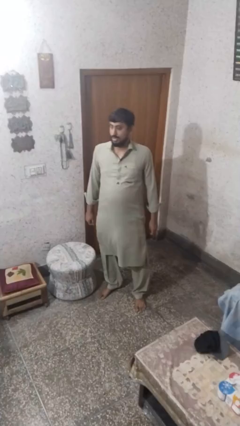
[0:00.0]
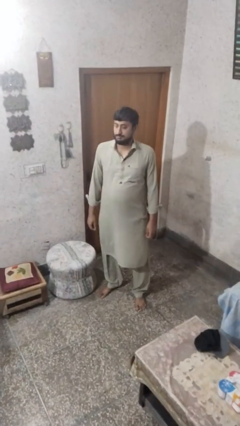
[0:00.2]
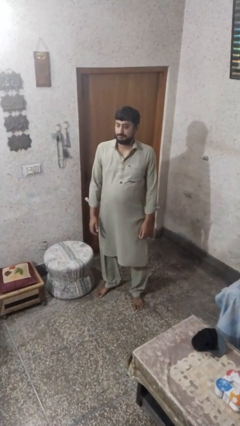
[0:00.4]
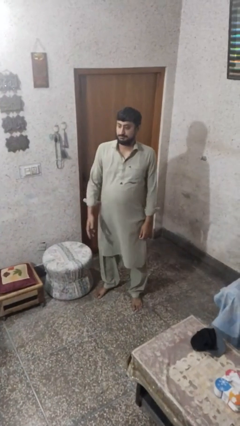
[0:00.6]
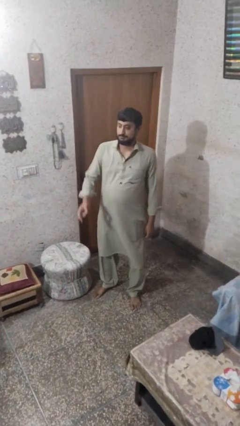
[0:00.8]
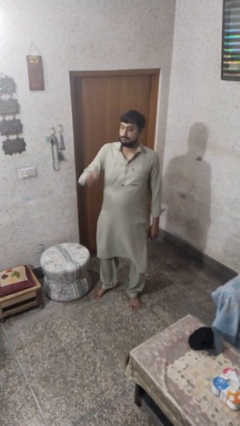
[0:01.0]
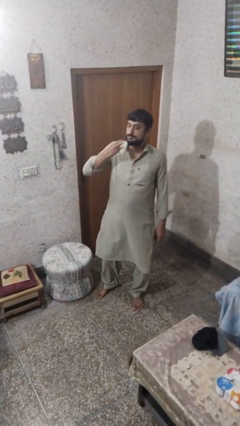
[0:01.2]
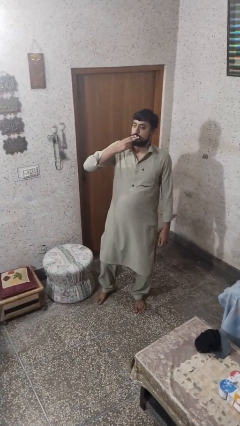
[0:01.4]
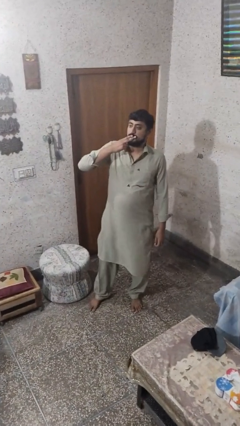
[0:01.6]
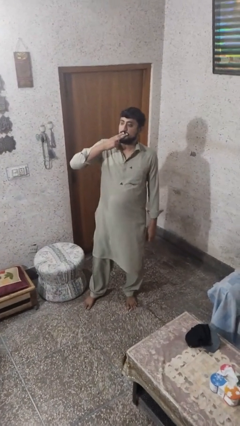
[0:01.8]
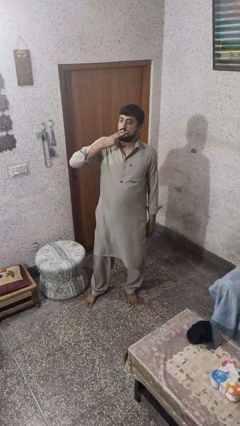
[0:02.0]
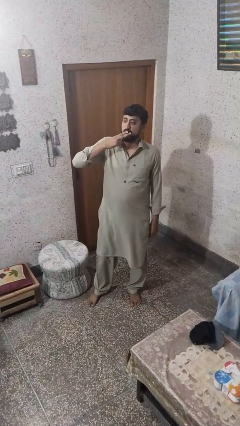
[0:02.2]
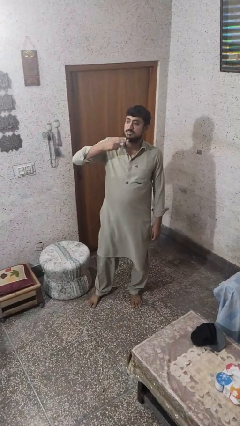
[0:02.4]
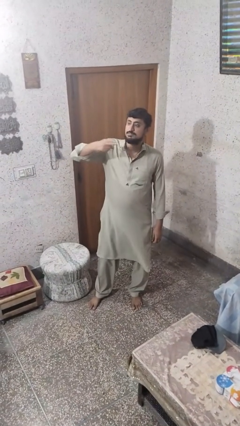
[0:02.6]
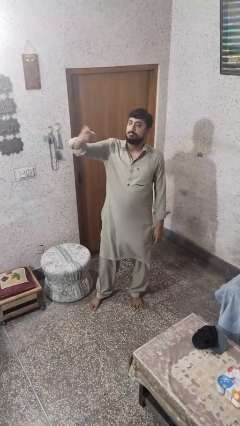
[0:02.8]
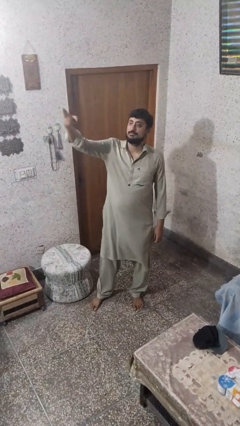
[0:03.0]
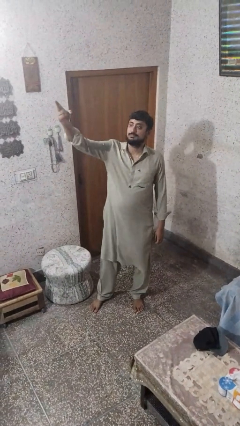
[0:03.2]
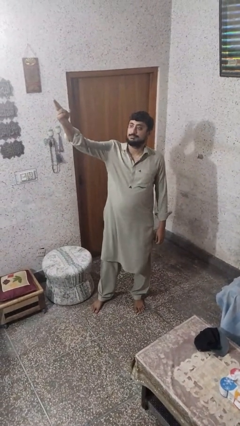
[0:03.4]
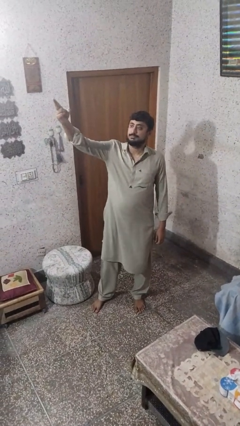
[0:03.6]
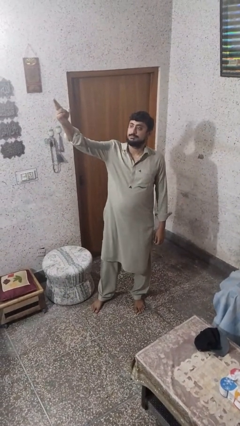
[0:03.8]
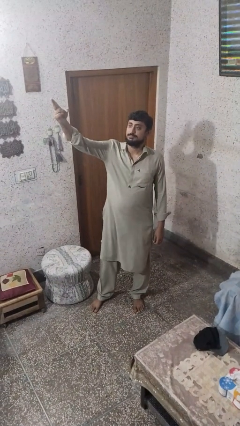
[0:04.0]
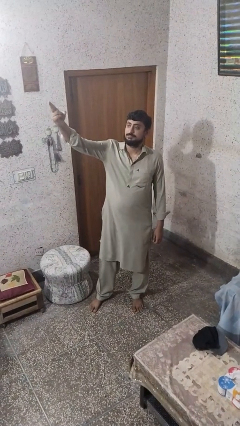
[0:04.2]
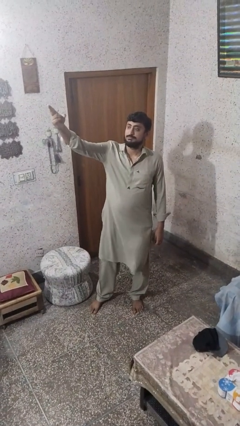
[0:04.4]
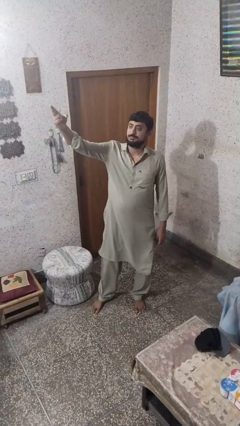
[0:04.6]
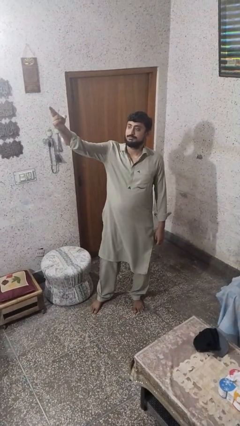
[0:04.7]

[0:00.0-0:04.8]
person gestures blow kiss

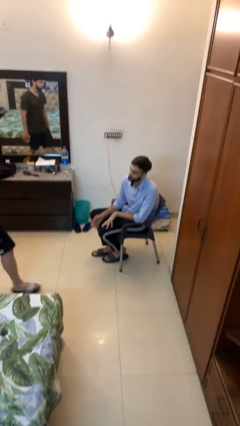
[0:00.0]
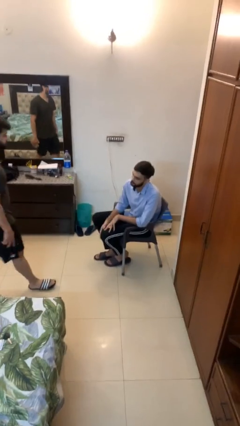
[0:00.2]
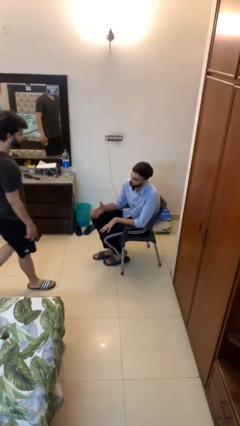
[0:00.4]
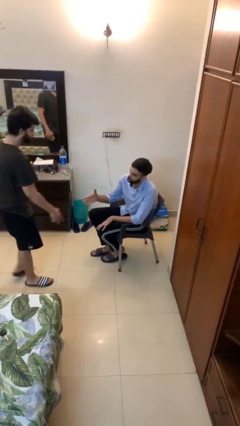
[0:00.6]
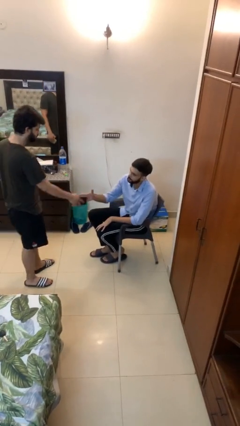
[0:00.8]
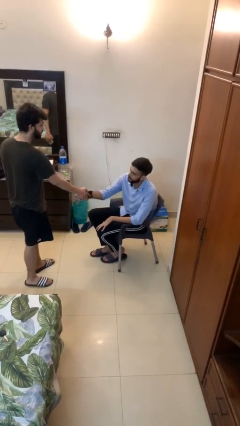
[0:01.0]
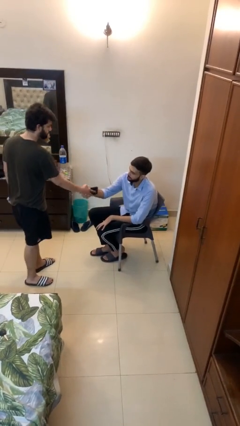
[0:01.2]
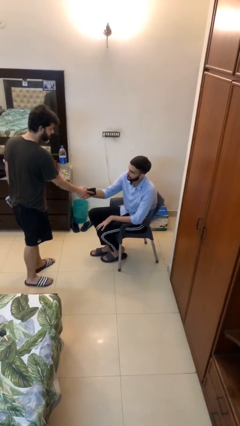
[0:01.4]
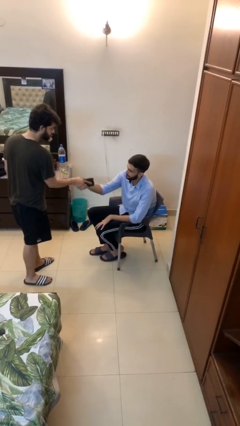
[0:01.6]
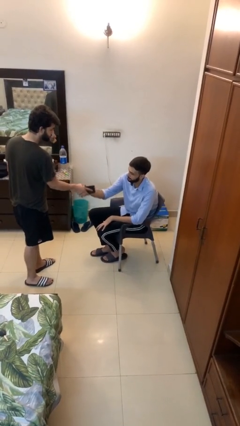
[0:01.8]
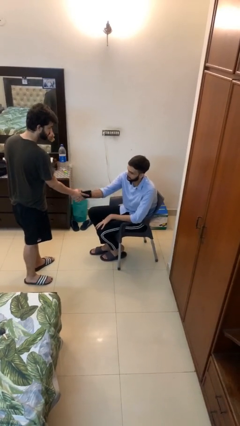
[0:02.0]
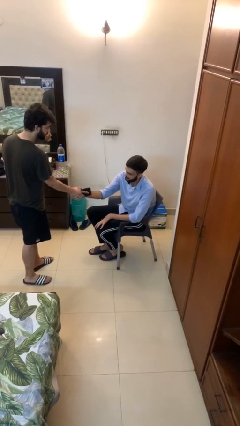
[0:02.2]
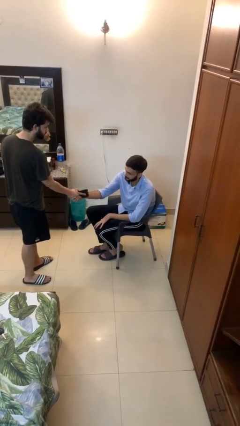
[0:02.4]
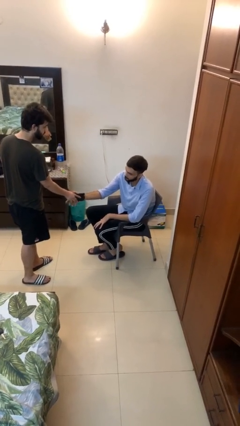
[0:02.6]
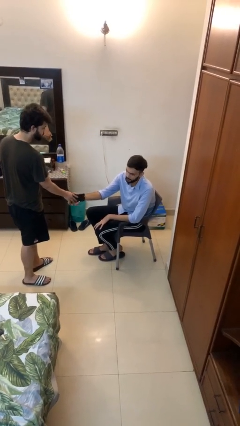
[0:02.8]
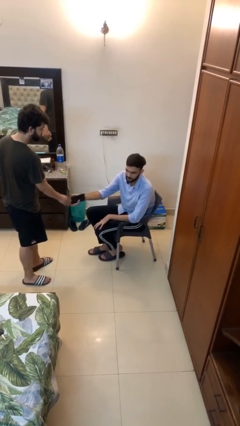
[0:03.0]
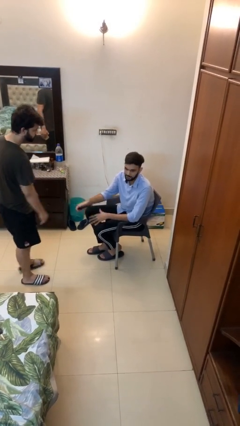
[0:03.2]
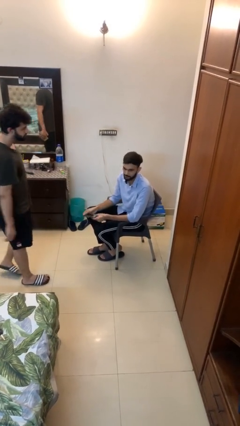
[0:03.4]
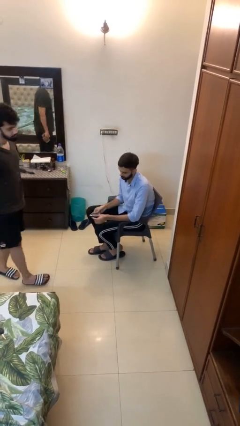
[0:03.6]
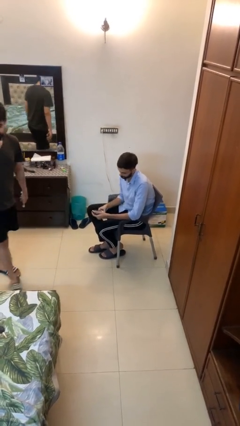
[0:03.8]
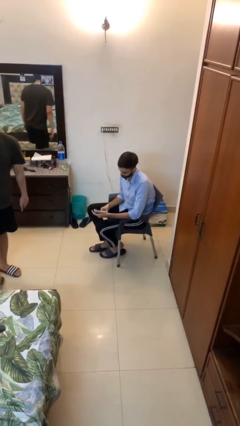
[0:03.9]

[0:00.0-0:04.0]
person shakes hand

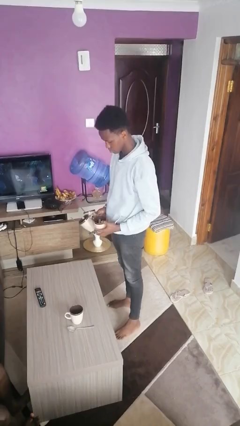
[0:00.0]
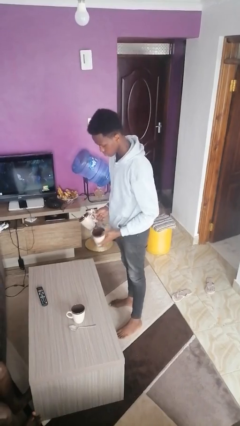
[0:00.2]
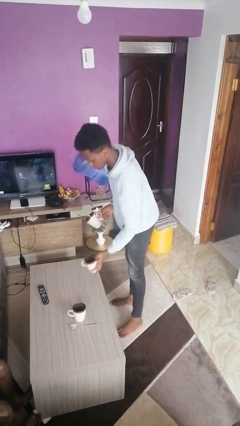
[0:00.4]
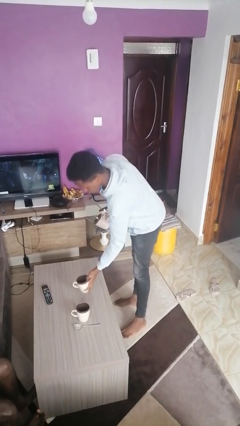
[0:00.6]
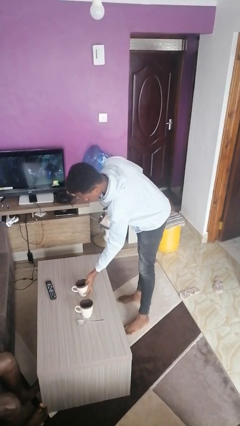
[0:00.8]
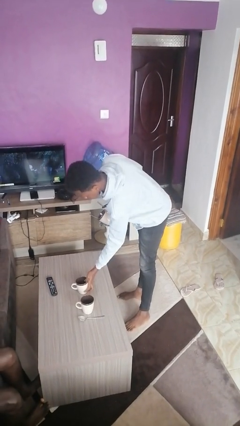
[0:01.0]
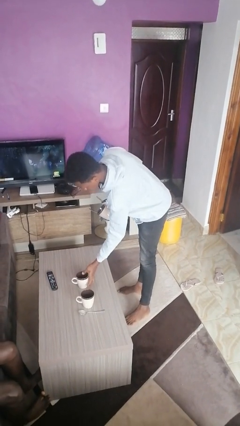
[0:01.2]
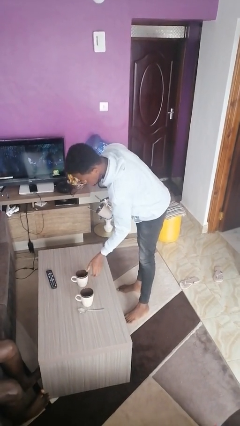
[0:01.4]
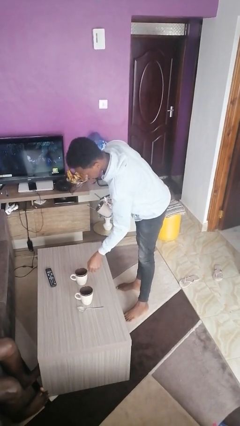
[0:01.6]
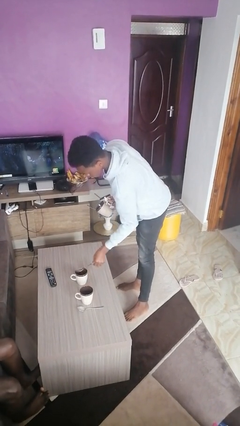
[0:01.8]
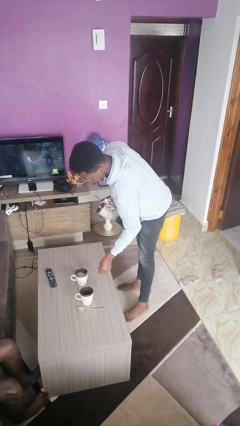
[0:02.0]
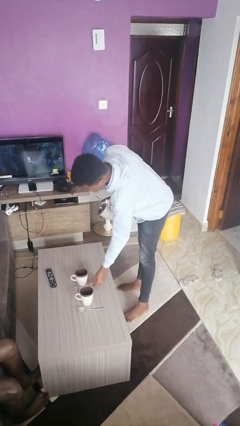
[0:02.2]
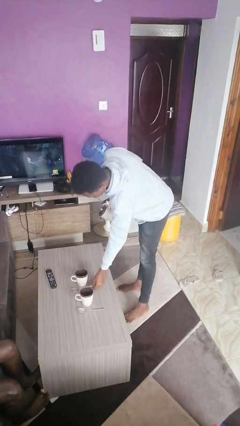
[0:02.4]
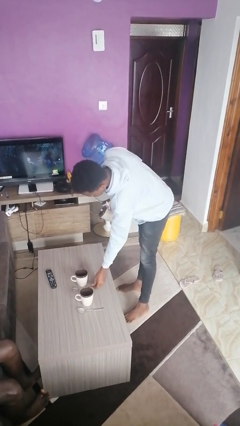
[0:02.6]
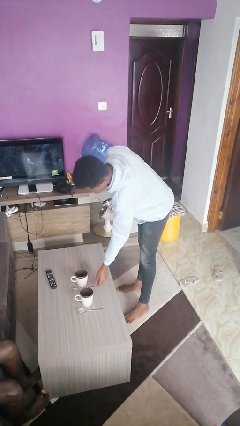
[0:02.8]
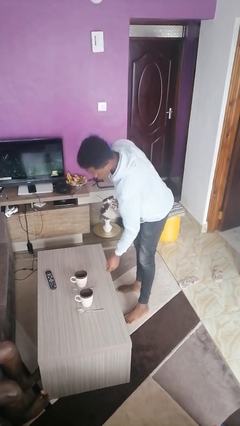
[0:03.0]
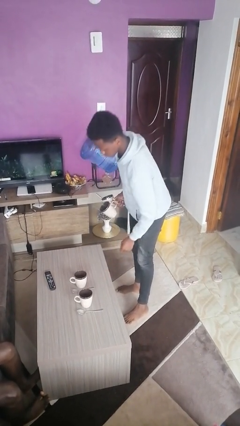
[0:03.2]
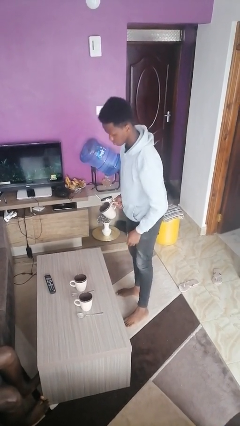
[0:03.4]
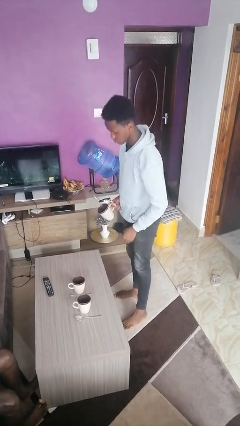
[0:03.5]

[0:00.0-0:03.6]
person sets table

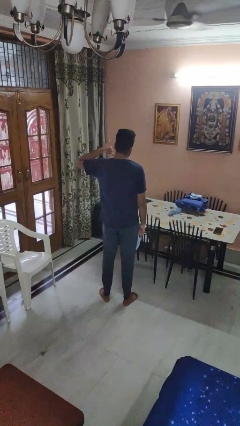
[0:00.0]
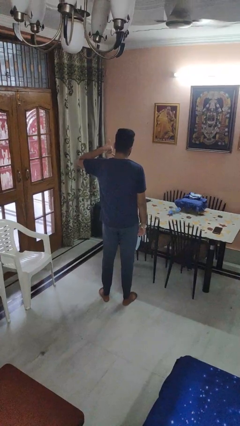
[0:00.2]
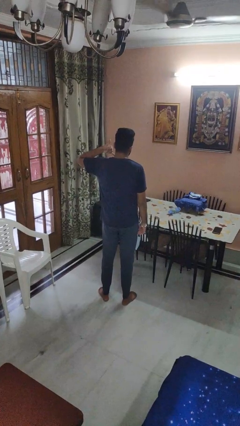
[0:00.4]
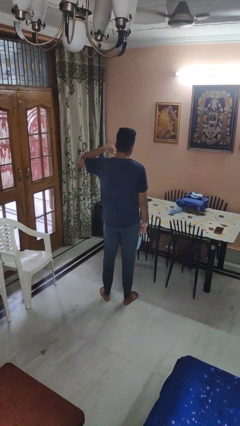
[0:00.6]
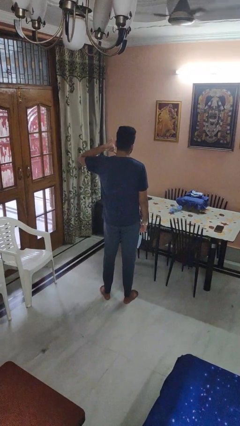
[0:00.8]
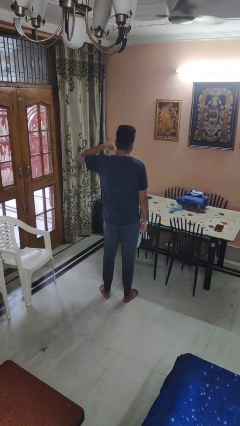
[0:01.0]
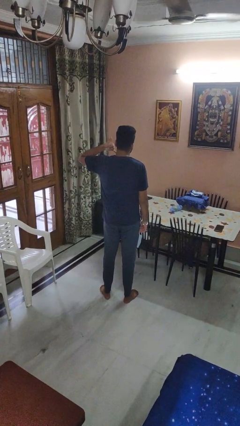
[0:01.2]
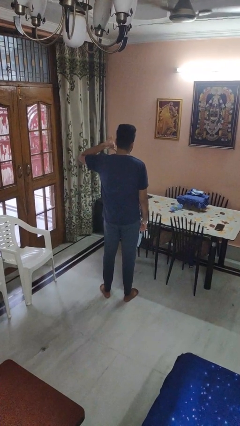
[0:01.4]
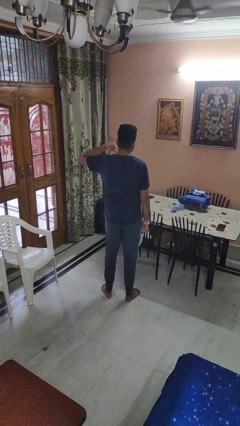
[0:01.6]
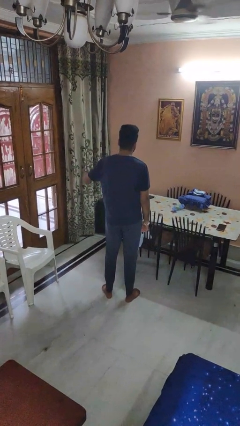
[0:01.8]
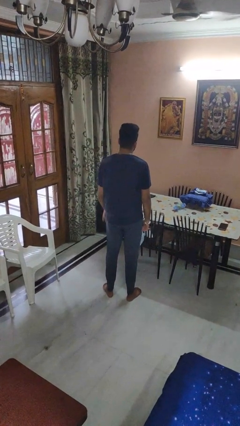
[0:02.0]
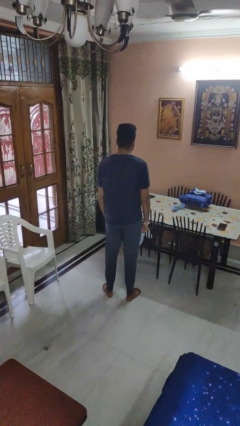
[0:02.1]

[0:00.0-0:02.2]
person gestures call me

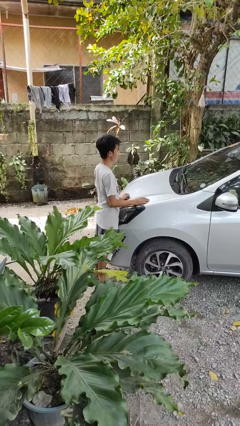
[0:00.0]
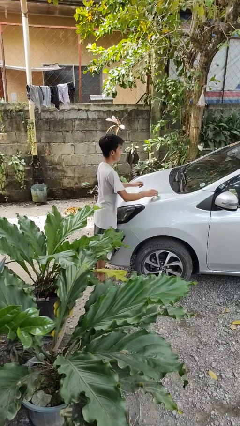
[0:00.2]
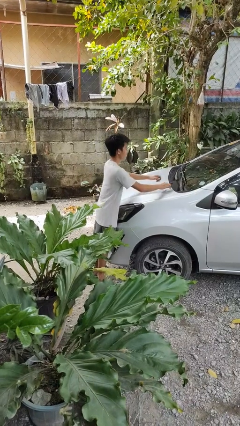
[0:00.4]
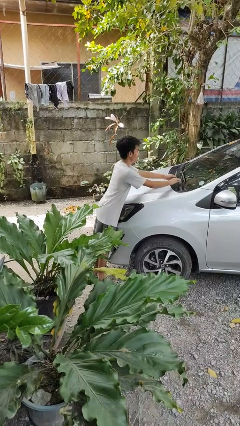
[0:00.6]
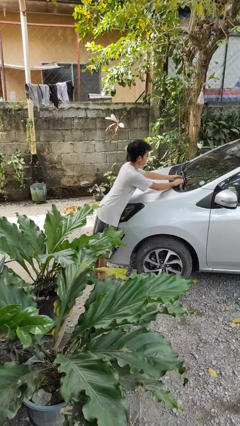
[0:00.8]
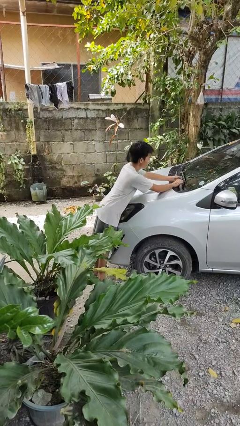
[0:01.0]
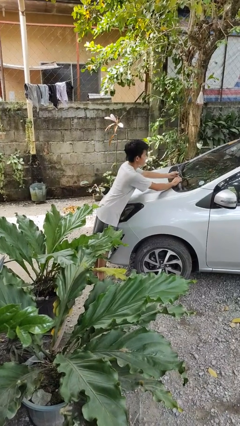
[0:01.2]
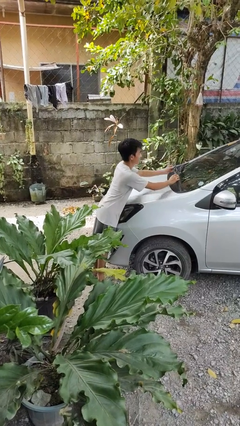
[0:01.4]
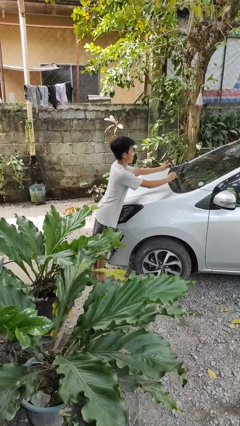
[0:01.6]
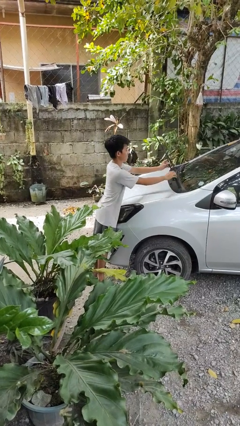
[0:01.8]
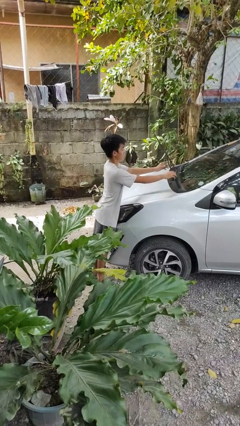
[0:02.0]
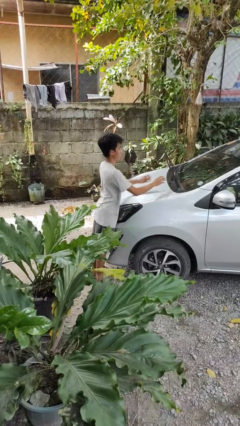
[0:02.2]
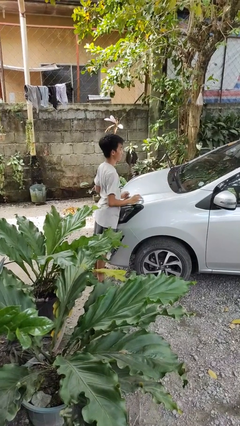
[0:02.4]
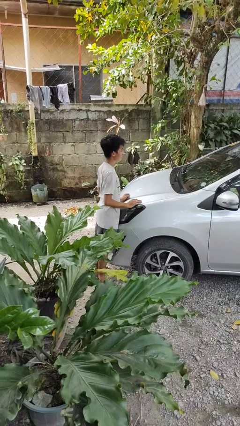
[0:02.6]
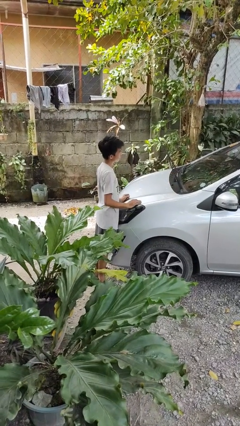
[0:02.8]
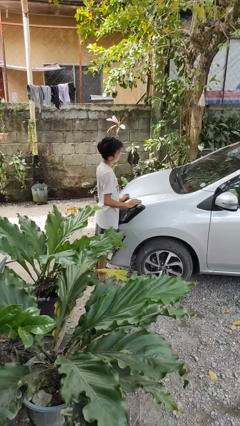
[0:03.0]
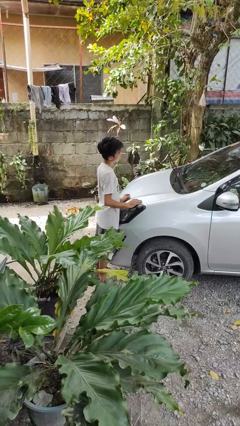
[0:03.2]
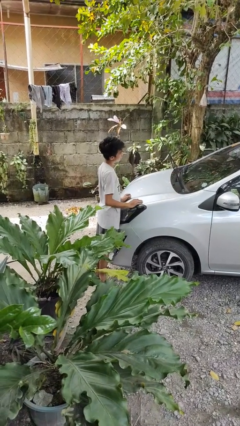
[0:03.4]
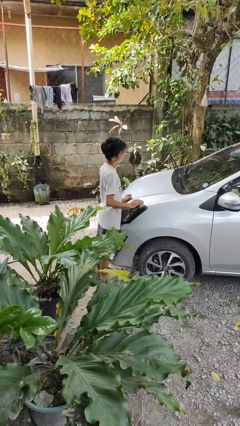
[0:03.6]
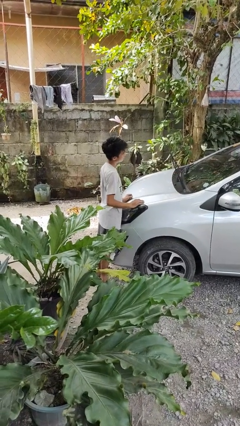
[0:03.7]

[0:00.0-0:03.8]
person flips up car wipers
